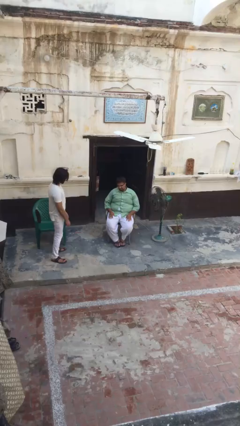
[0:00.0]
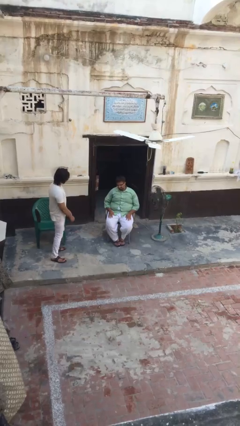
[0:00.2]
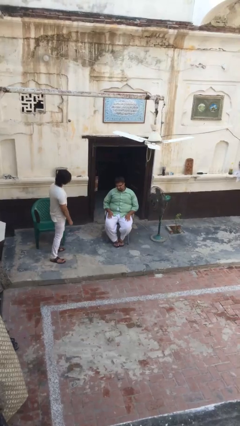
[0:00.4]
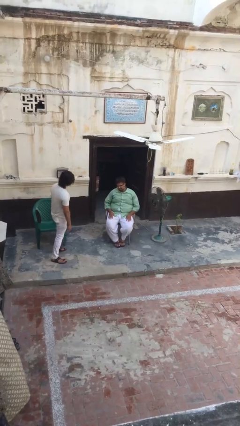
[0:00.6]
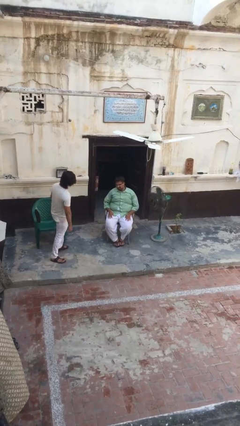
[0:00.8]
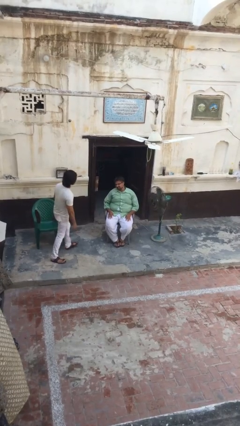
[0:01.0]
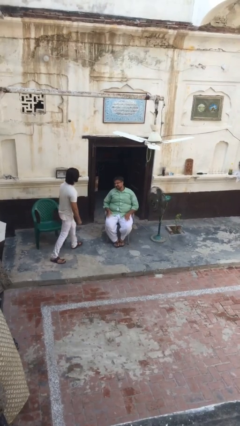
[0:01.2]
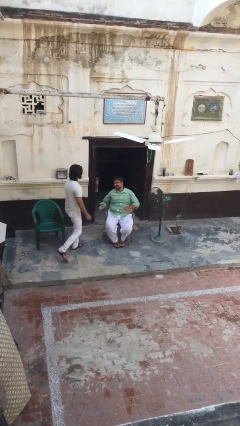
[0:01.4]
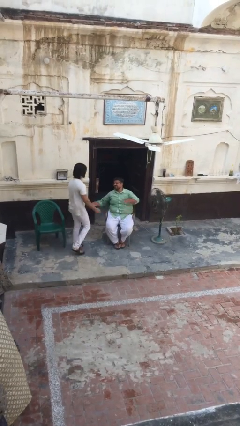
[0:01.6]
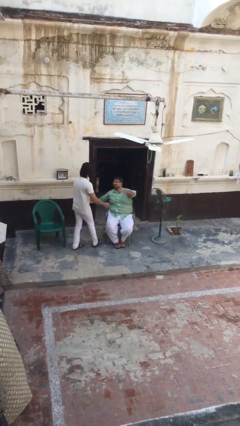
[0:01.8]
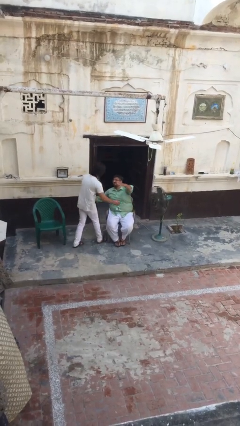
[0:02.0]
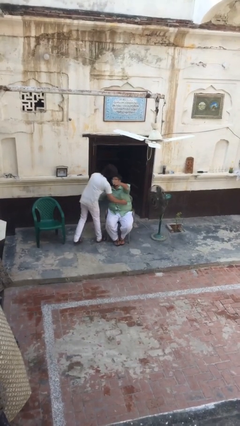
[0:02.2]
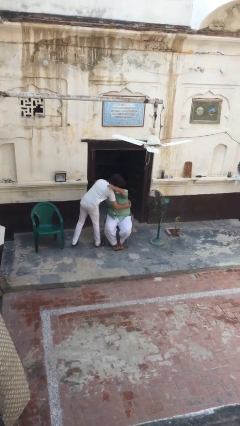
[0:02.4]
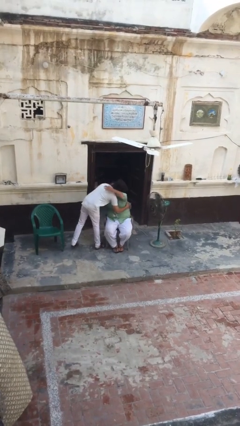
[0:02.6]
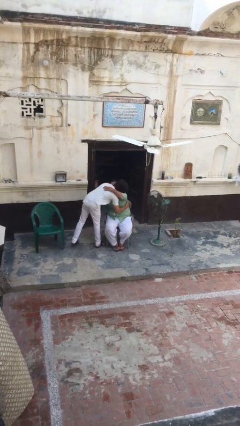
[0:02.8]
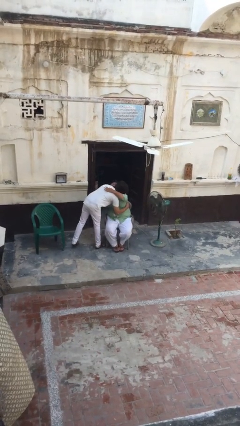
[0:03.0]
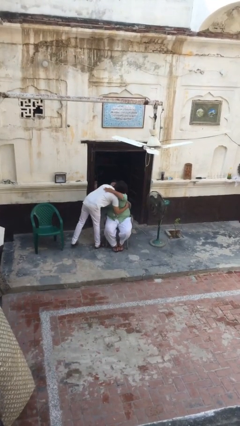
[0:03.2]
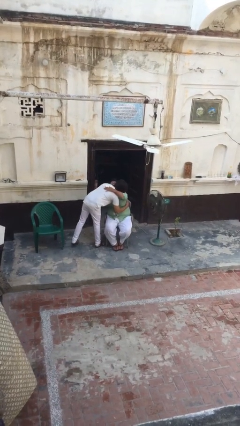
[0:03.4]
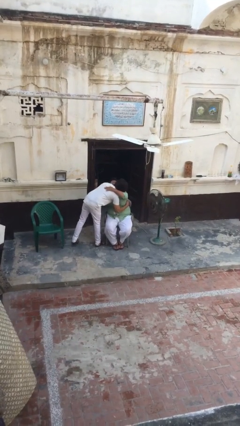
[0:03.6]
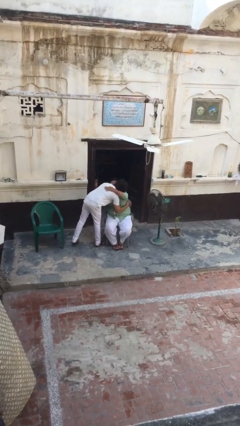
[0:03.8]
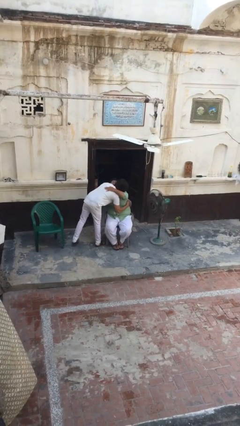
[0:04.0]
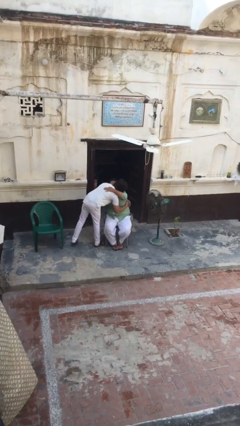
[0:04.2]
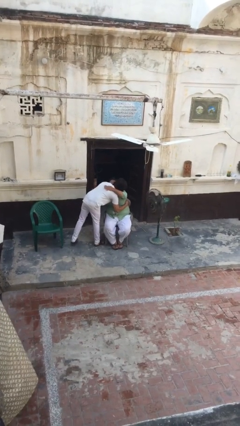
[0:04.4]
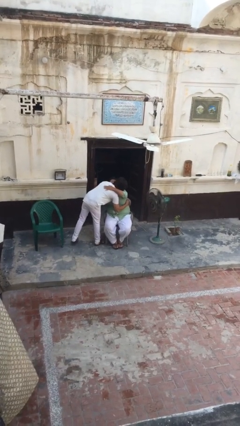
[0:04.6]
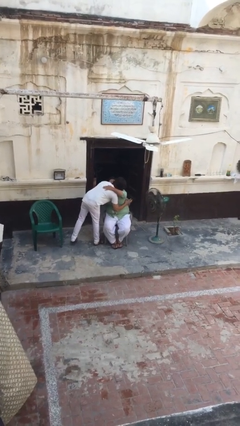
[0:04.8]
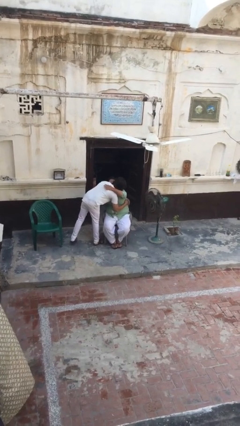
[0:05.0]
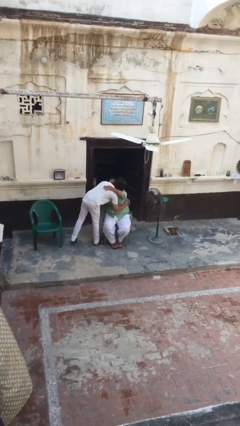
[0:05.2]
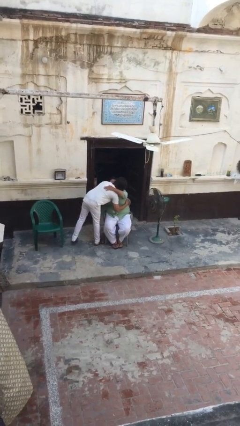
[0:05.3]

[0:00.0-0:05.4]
person embraces person

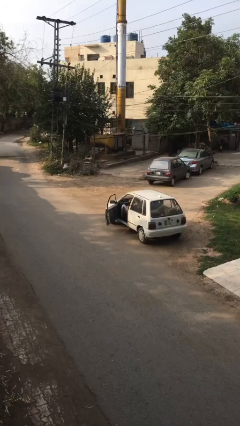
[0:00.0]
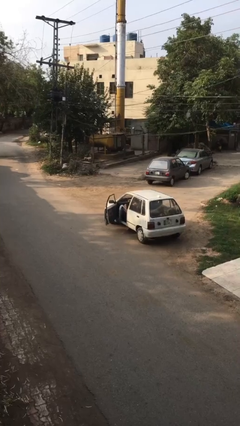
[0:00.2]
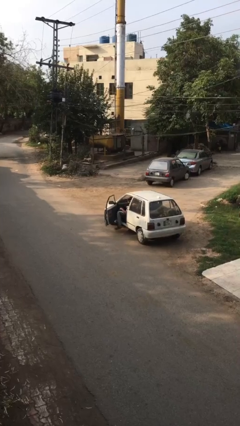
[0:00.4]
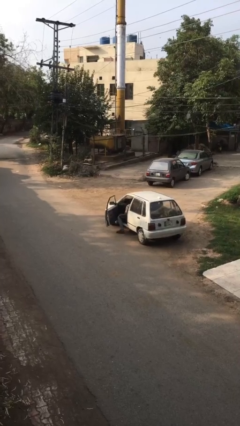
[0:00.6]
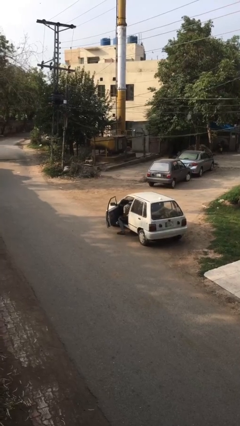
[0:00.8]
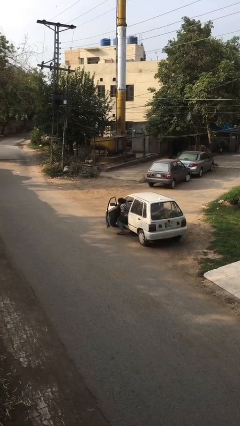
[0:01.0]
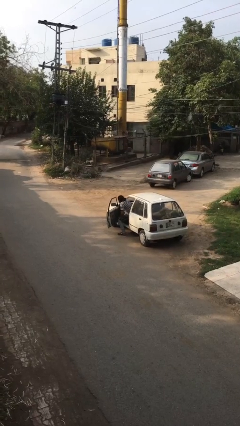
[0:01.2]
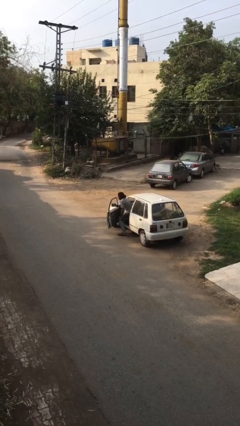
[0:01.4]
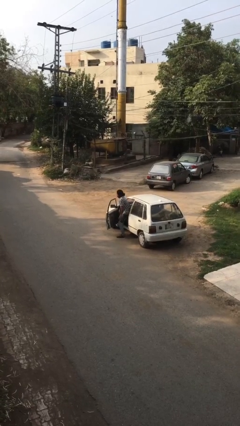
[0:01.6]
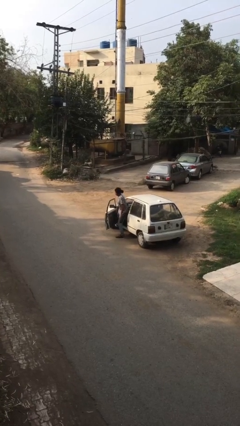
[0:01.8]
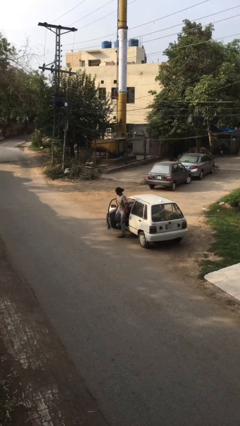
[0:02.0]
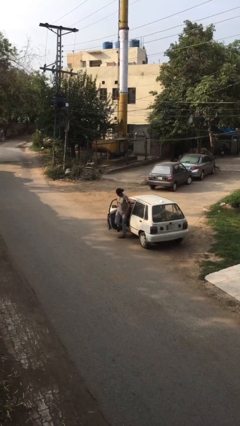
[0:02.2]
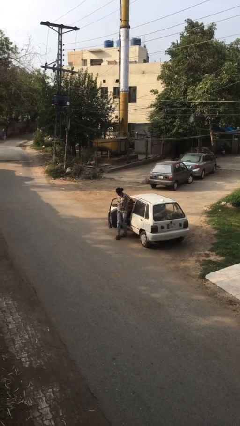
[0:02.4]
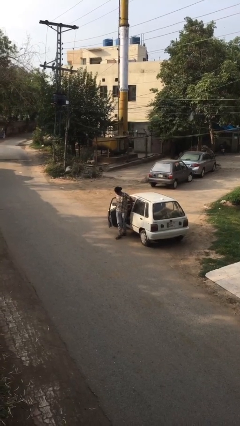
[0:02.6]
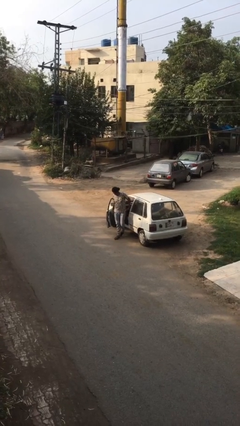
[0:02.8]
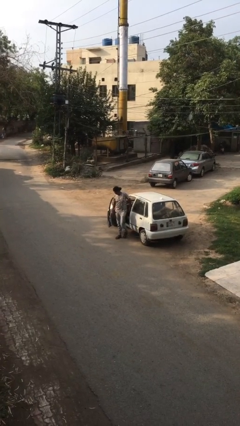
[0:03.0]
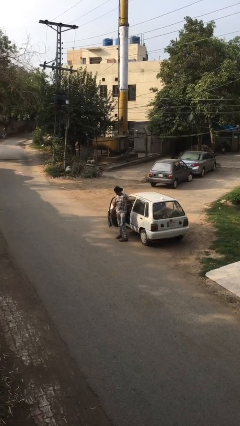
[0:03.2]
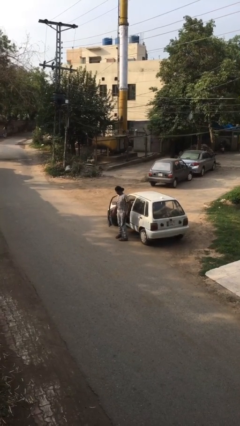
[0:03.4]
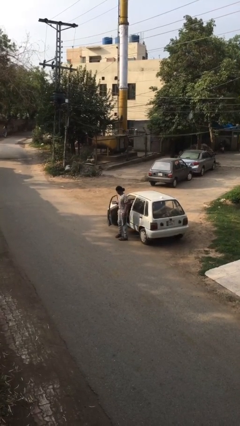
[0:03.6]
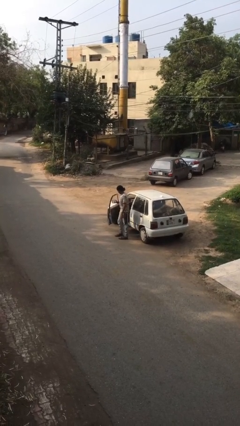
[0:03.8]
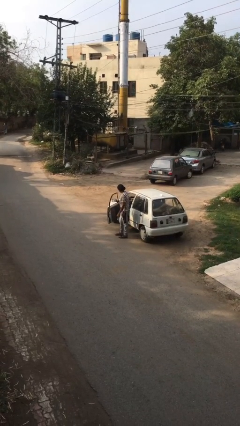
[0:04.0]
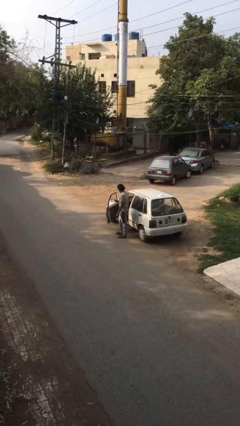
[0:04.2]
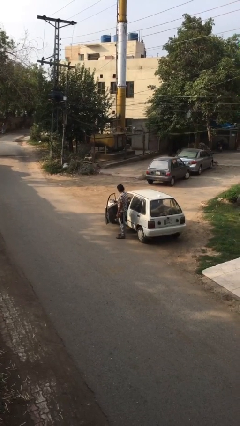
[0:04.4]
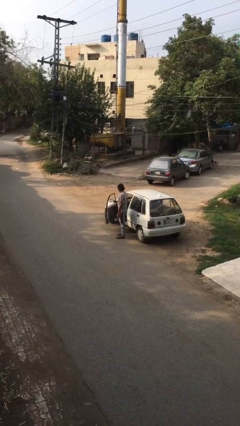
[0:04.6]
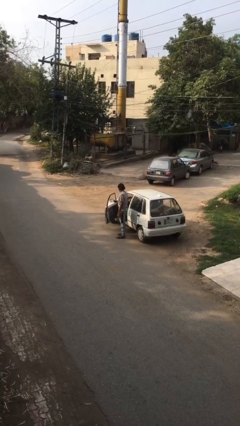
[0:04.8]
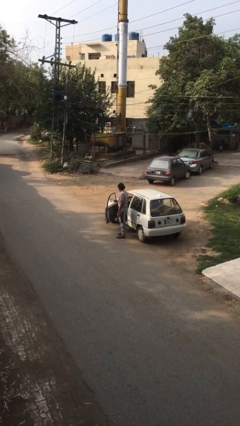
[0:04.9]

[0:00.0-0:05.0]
person exits car

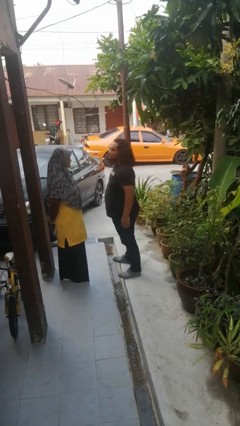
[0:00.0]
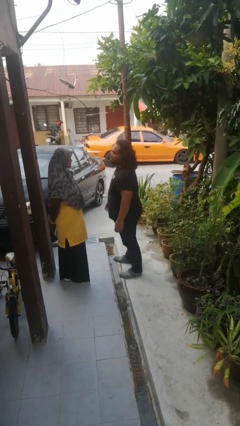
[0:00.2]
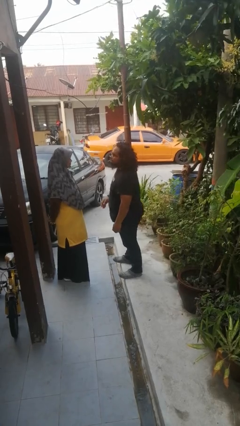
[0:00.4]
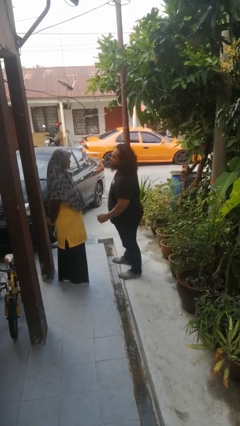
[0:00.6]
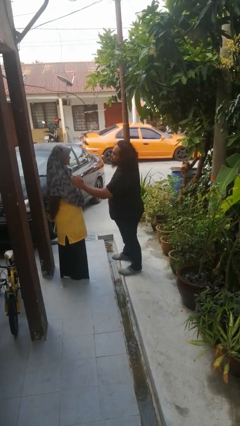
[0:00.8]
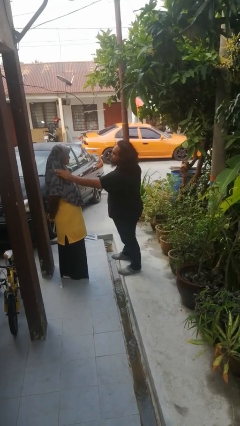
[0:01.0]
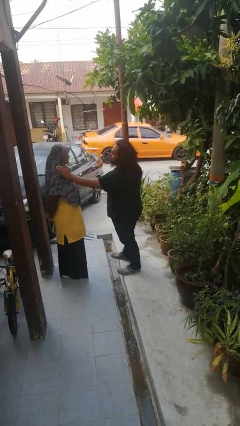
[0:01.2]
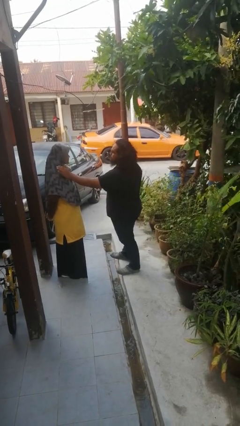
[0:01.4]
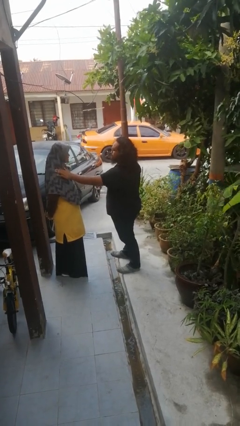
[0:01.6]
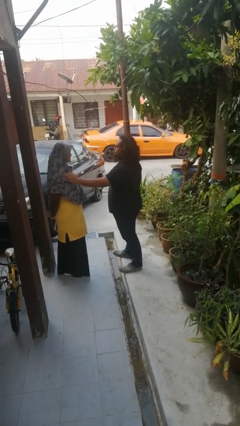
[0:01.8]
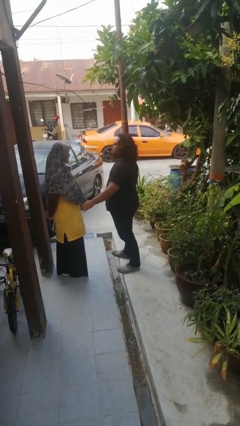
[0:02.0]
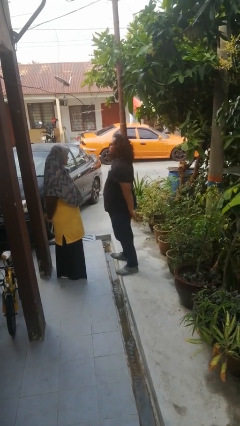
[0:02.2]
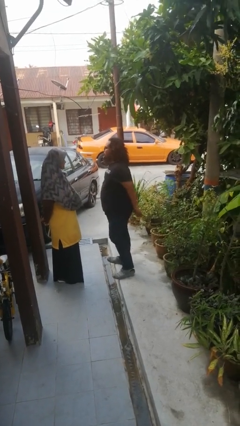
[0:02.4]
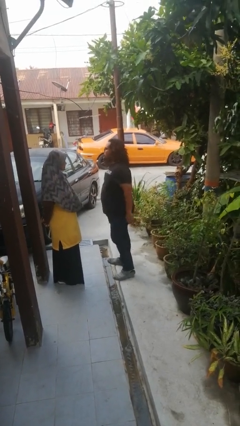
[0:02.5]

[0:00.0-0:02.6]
person pounds shoulders of person

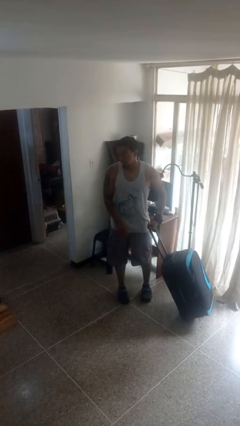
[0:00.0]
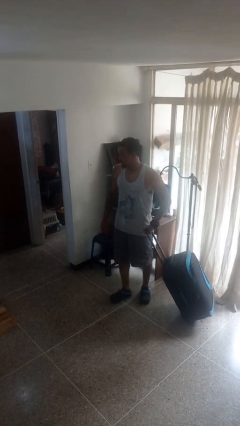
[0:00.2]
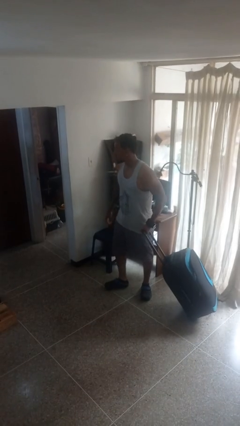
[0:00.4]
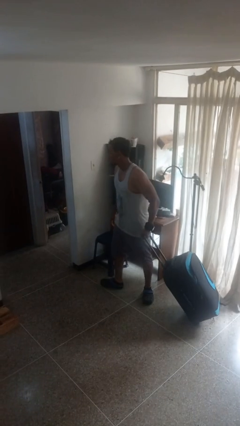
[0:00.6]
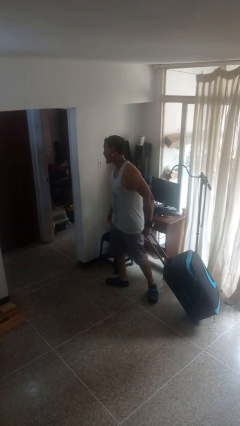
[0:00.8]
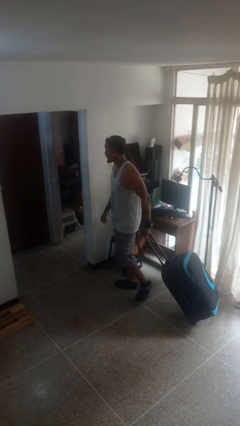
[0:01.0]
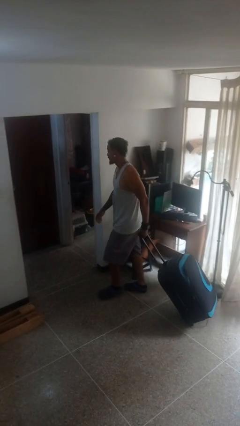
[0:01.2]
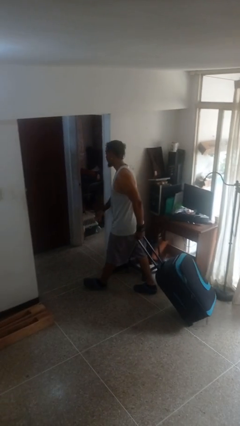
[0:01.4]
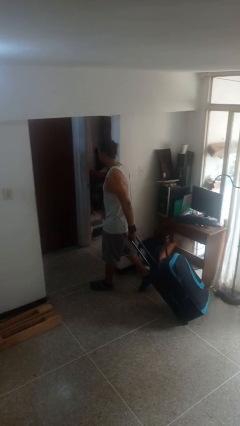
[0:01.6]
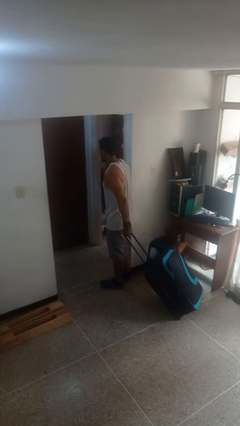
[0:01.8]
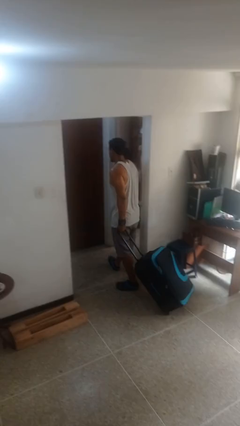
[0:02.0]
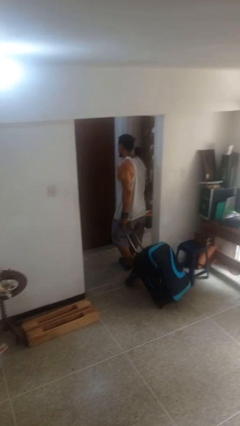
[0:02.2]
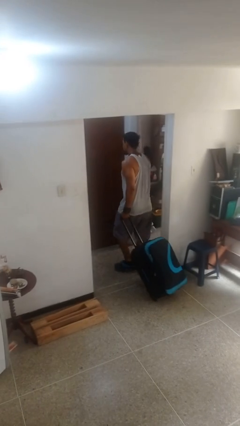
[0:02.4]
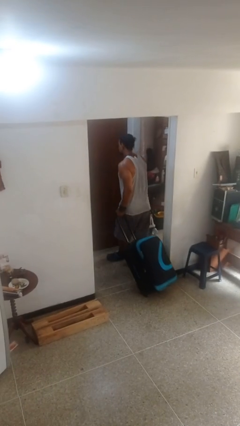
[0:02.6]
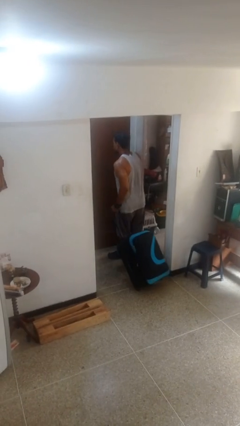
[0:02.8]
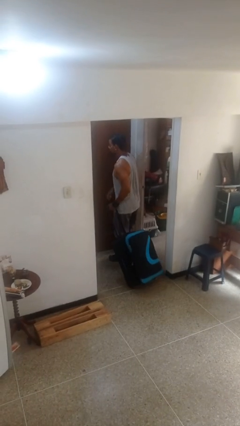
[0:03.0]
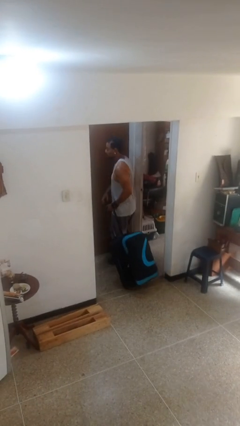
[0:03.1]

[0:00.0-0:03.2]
person pulls wheeled cart

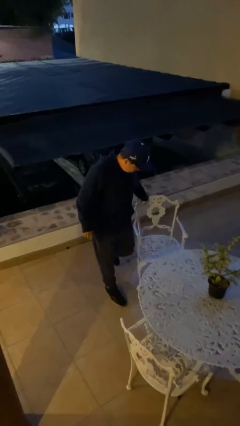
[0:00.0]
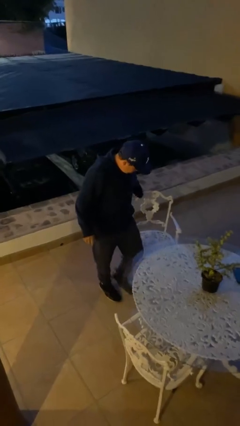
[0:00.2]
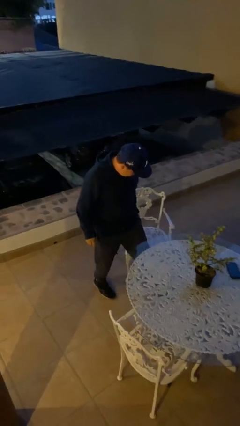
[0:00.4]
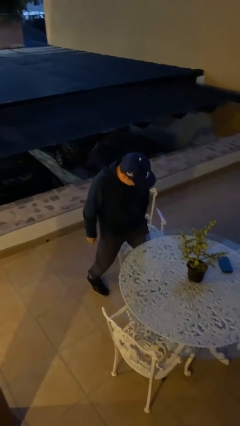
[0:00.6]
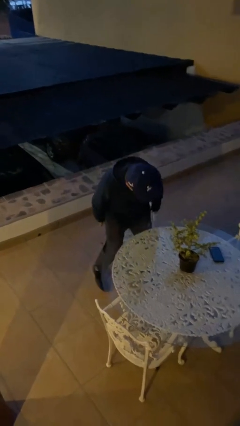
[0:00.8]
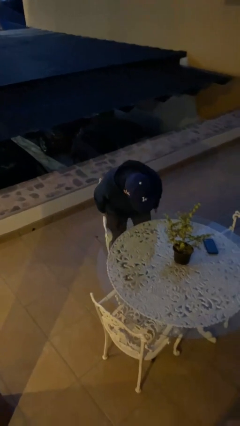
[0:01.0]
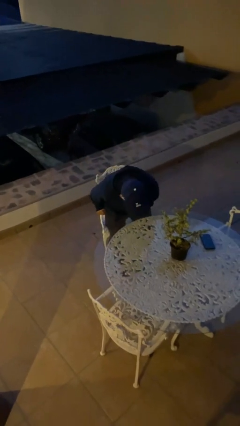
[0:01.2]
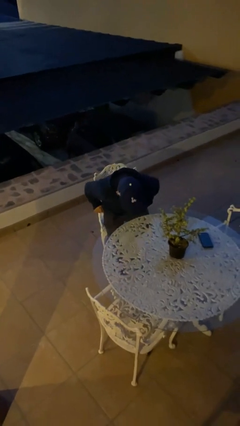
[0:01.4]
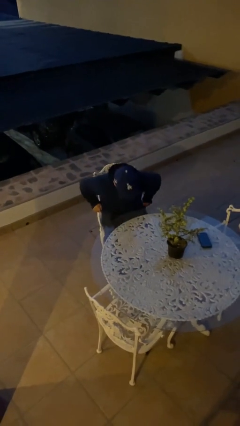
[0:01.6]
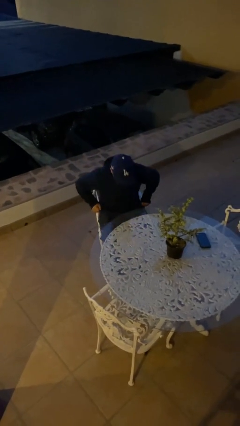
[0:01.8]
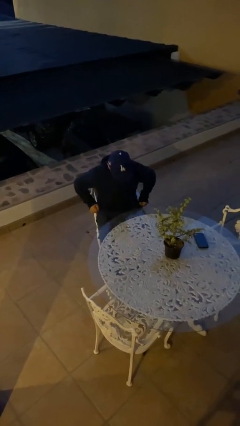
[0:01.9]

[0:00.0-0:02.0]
person sits down
